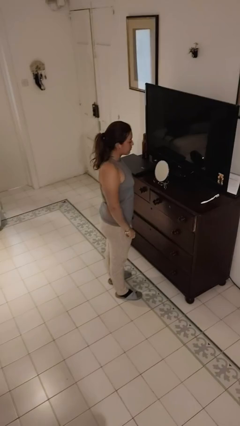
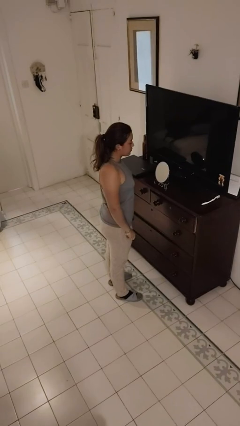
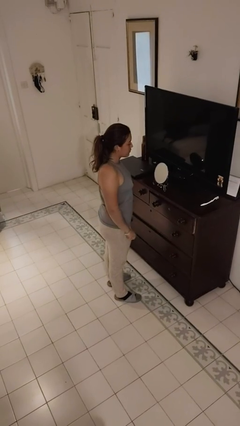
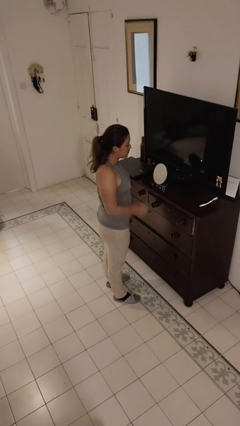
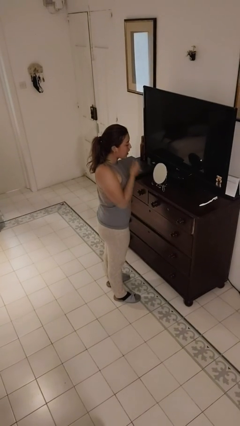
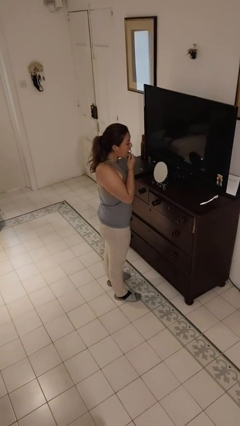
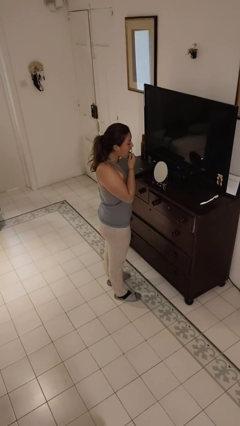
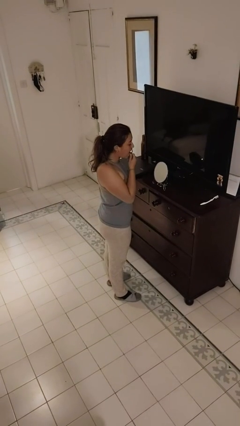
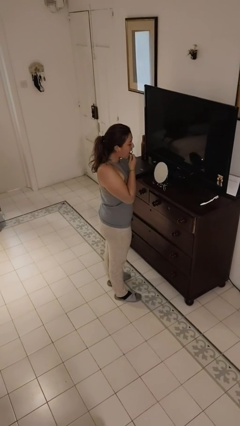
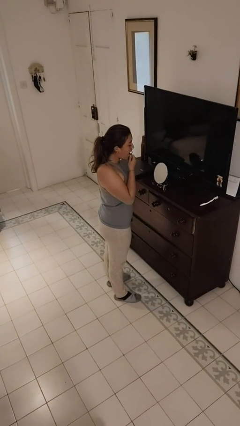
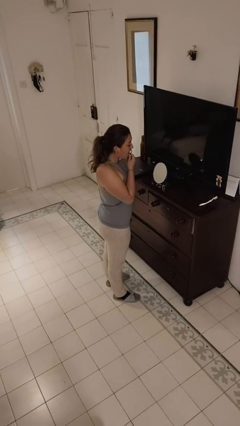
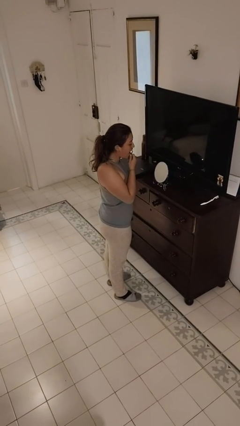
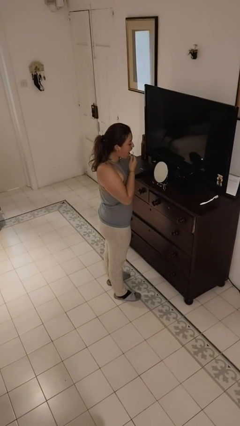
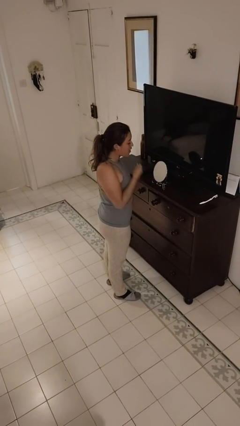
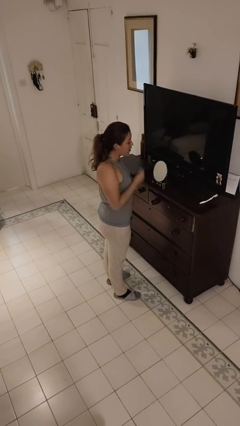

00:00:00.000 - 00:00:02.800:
person flosses

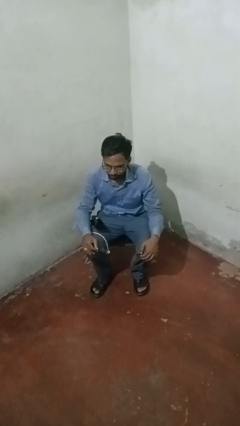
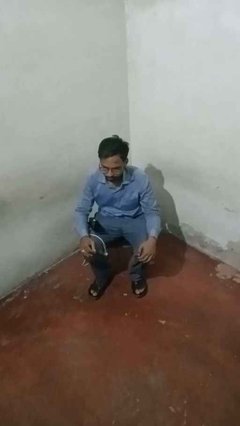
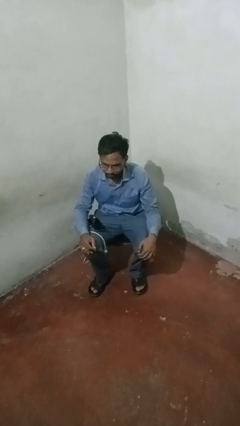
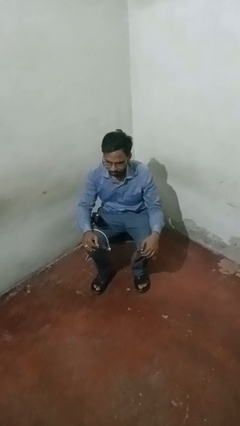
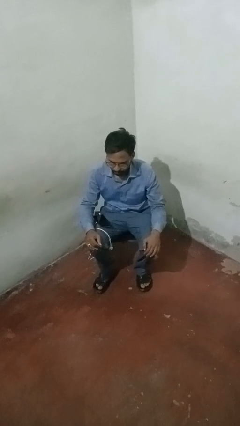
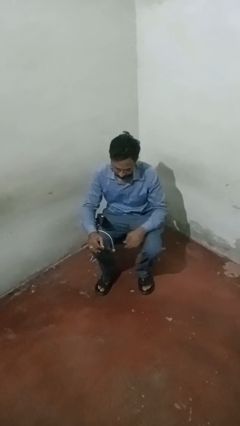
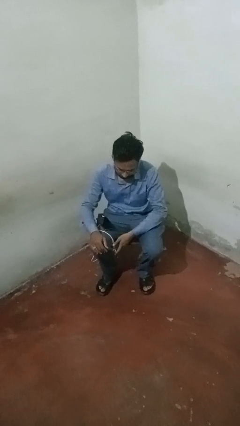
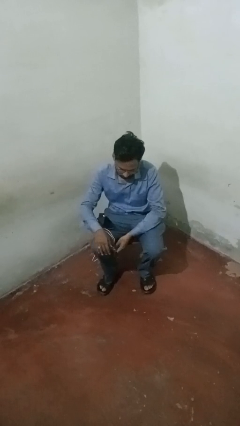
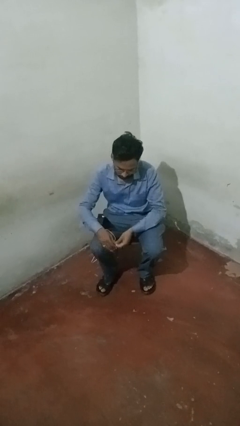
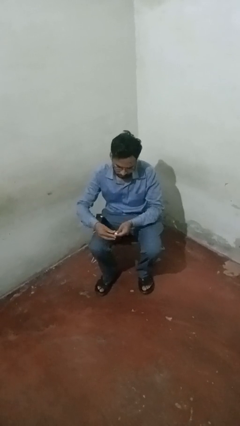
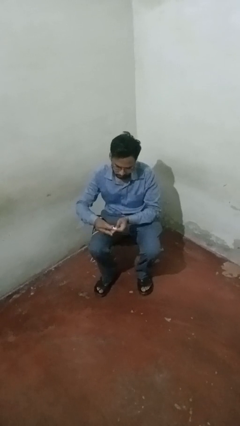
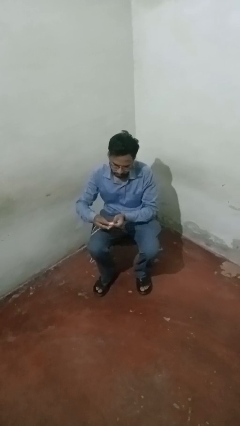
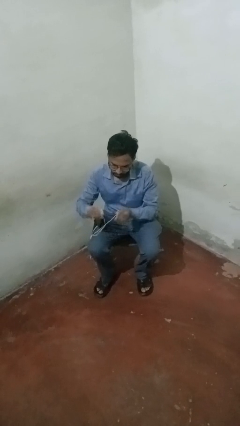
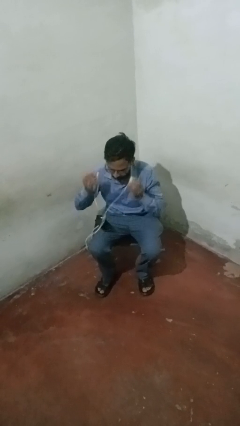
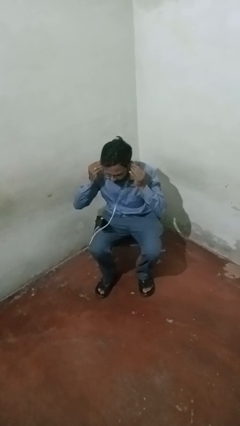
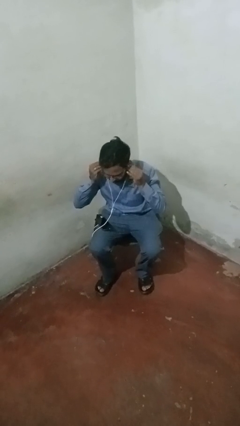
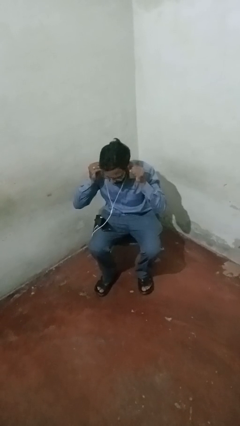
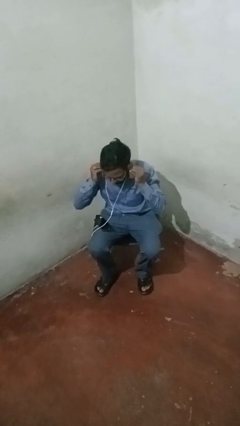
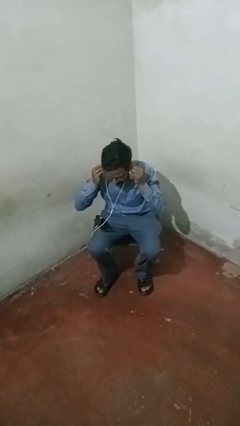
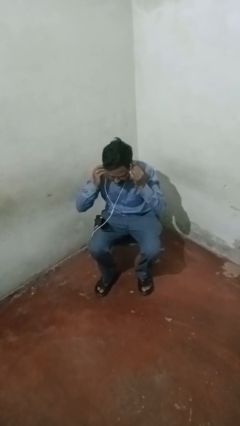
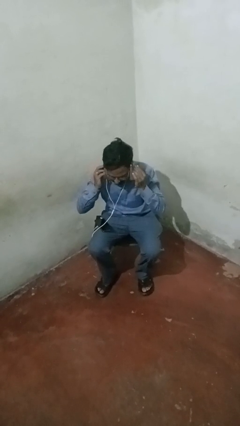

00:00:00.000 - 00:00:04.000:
person puts on headphones

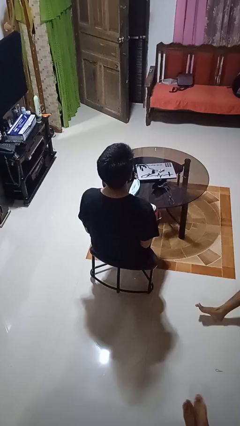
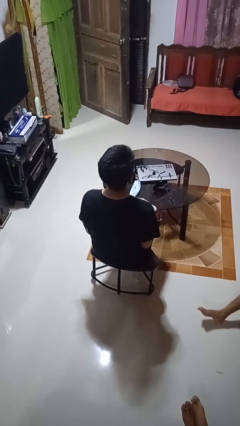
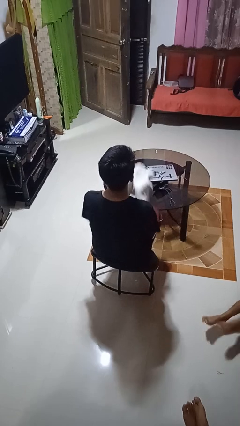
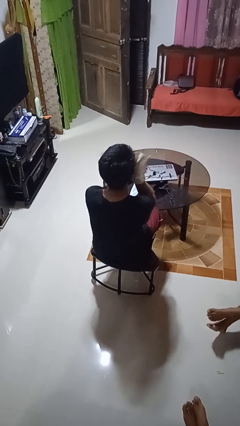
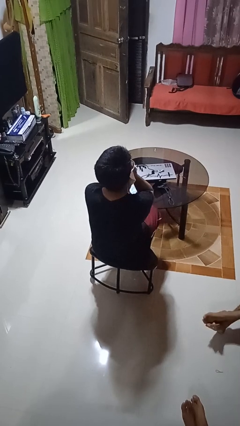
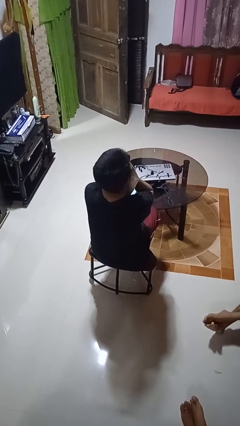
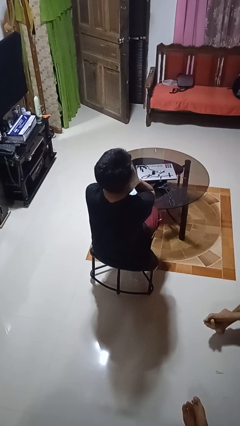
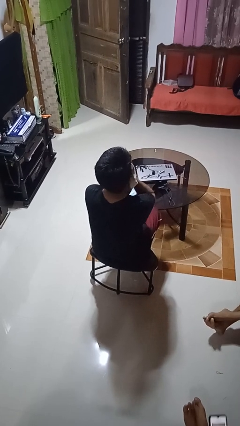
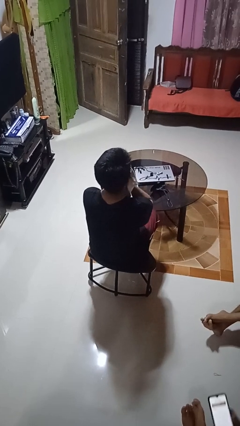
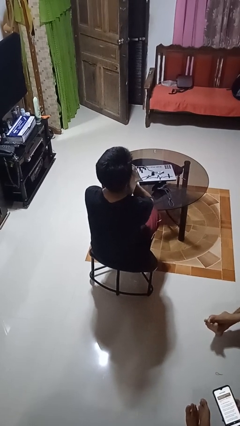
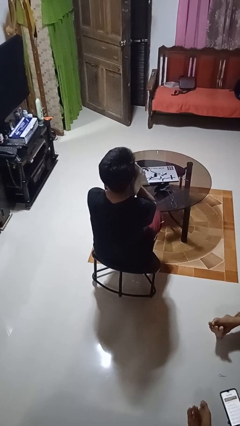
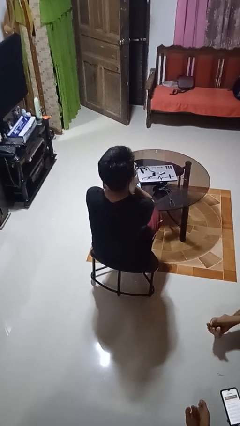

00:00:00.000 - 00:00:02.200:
person wipes mouth with napkin

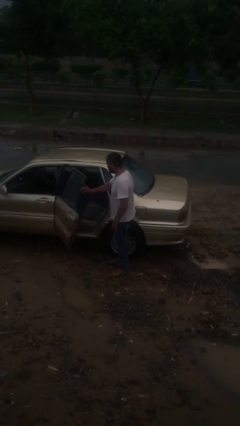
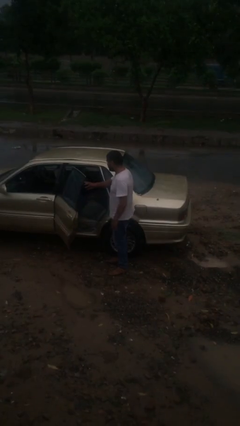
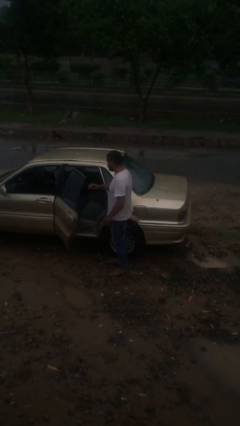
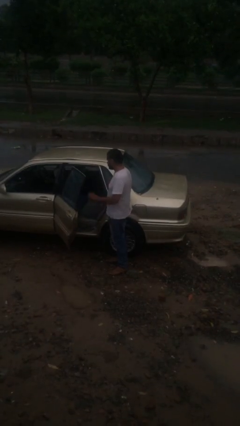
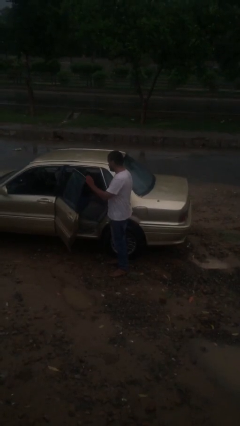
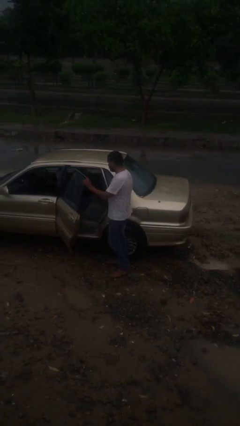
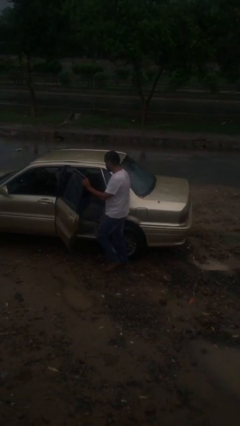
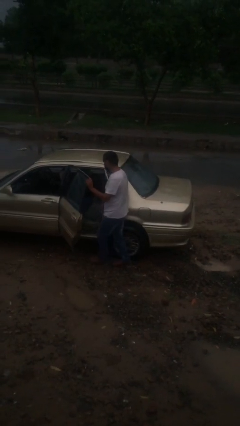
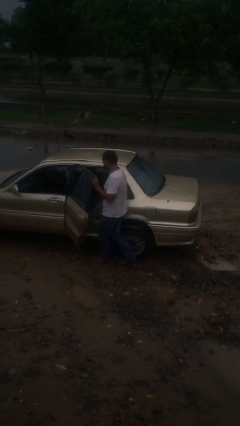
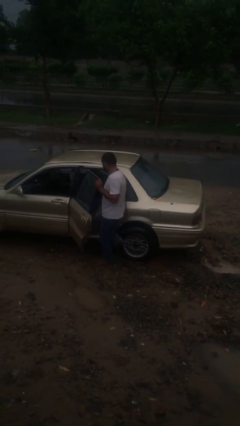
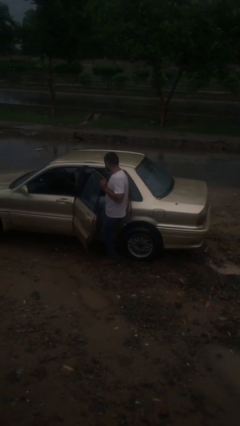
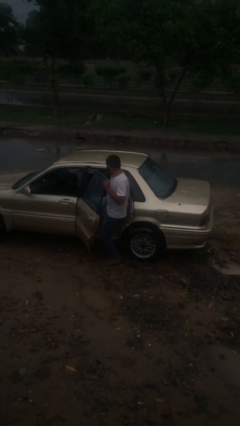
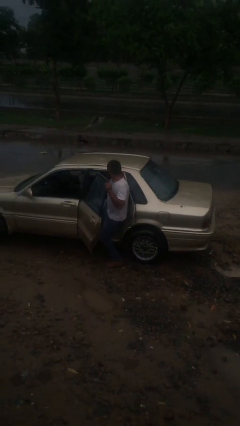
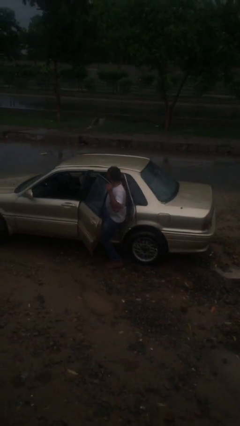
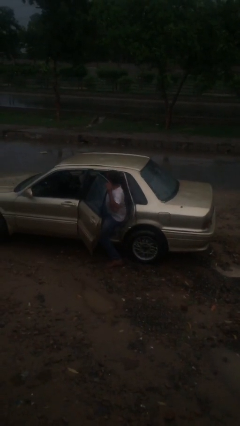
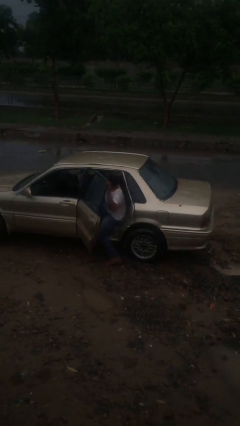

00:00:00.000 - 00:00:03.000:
person enters car

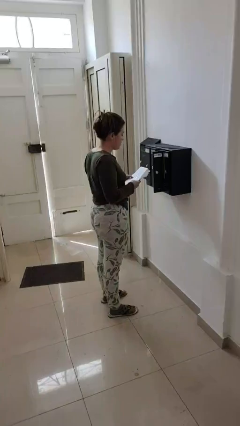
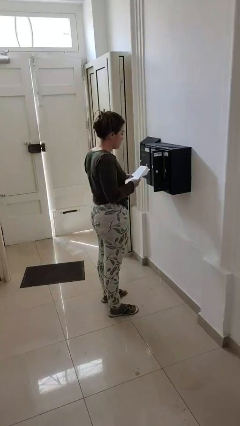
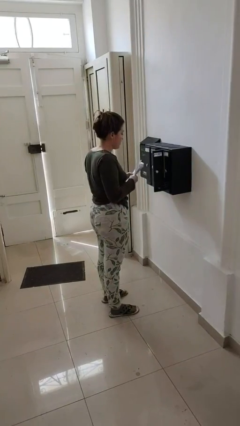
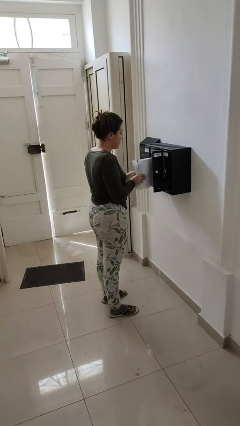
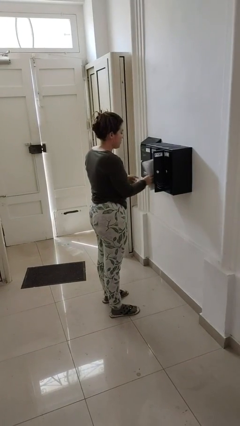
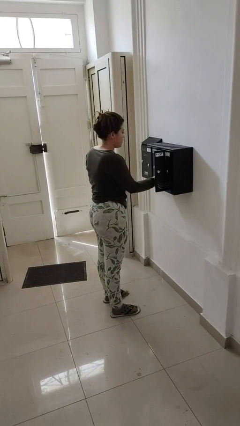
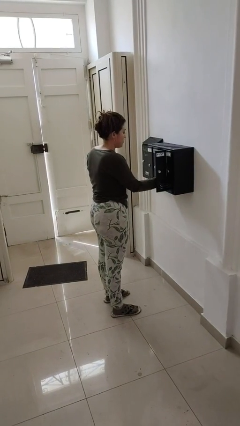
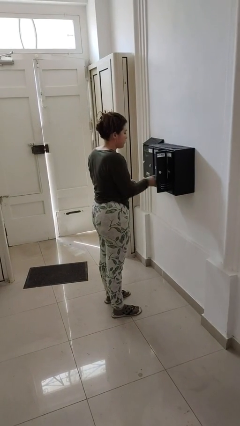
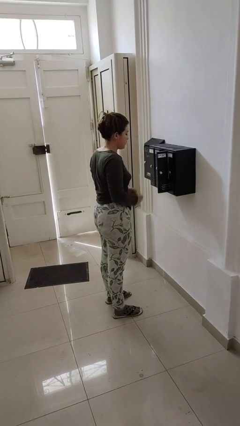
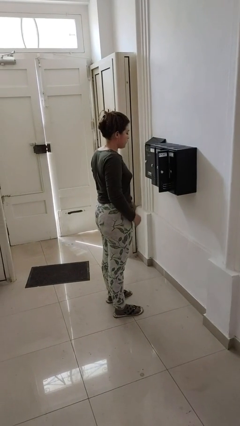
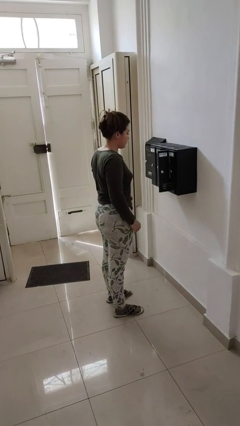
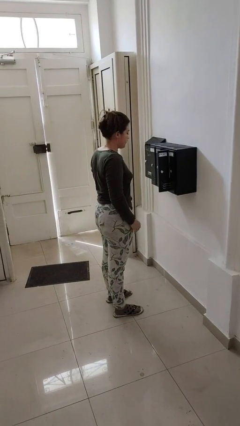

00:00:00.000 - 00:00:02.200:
person puts letters in mailbox

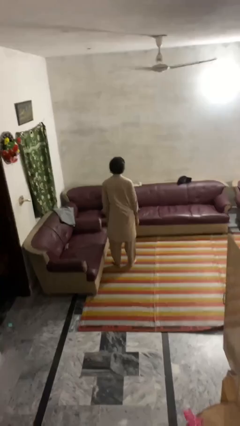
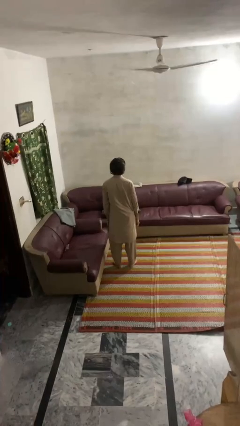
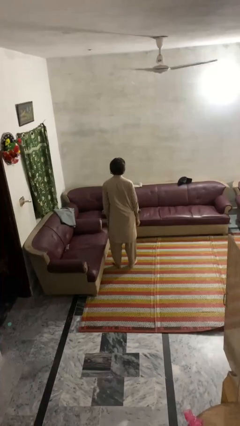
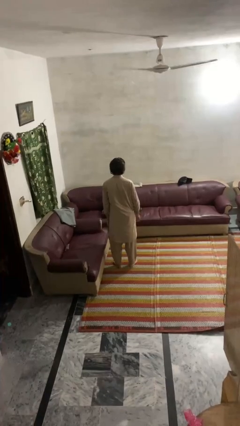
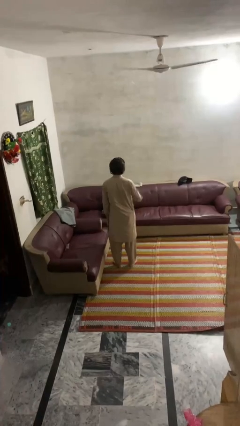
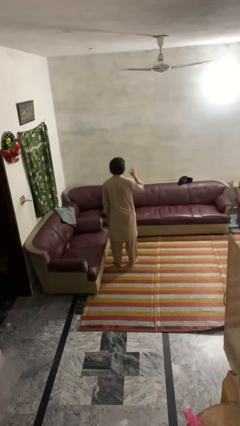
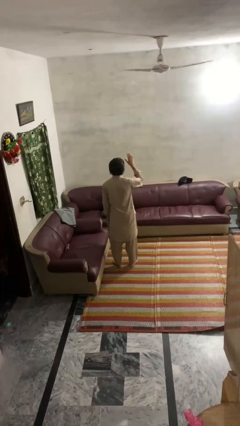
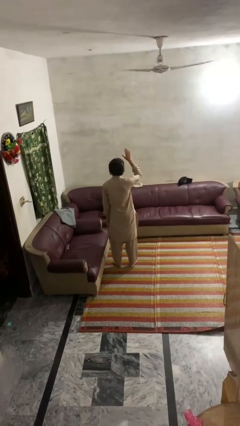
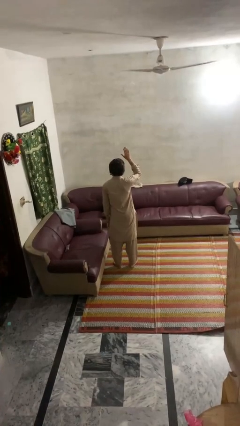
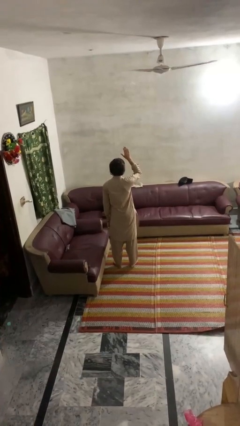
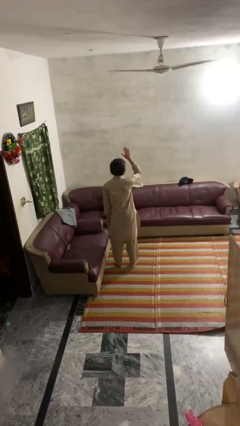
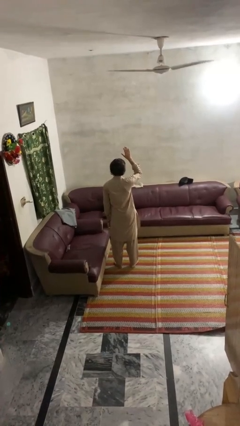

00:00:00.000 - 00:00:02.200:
person gestures raise hand

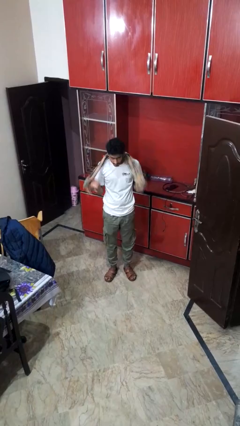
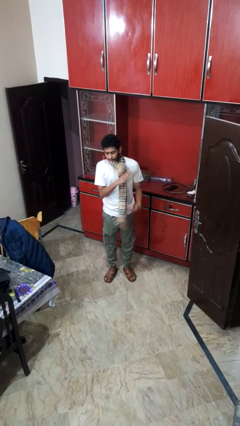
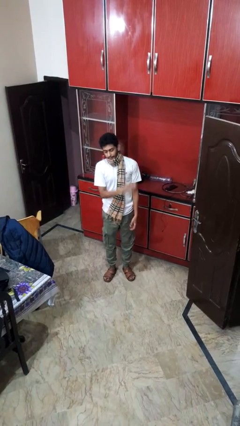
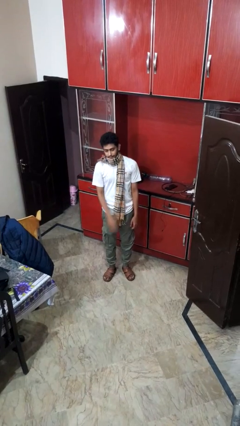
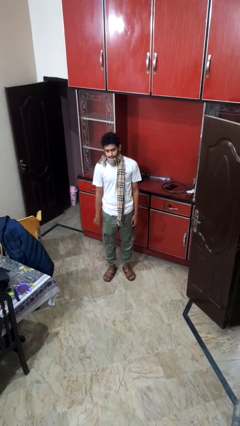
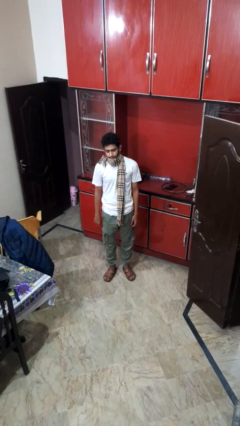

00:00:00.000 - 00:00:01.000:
person puts on scarf
